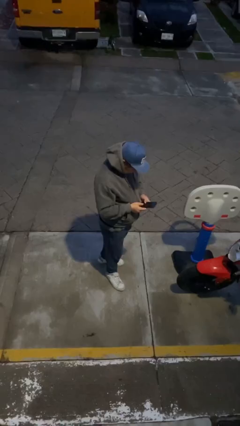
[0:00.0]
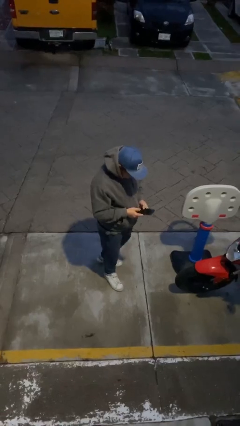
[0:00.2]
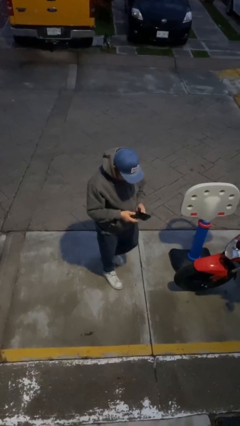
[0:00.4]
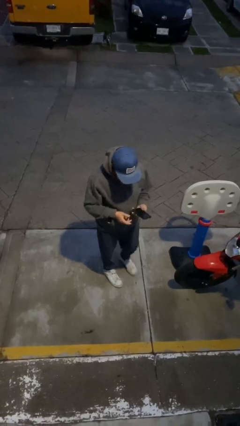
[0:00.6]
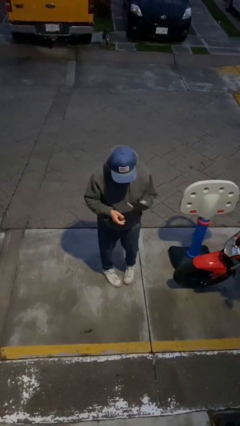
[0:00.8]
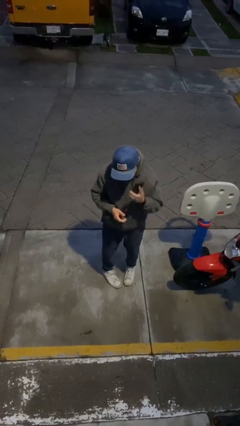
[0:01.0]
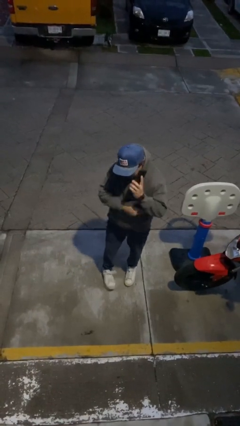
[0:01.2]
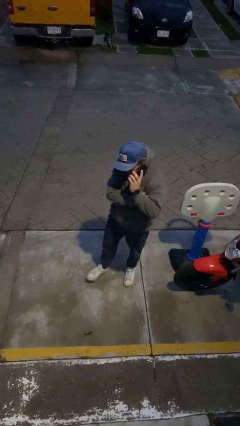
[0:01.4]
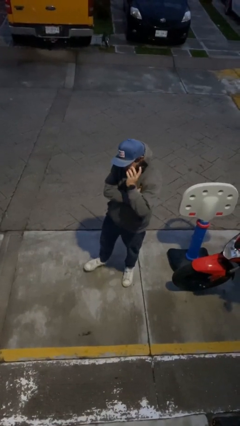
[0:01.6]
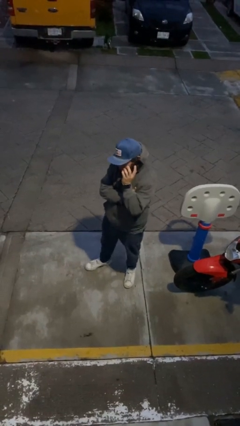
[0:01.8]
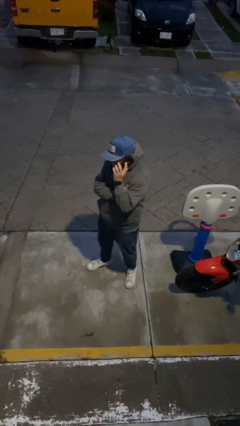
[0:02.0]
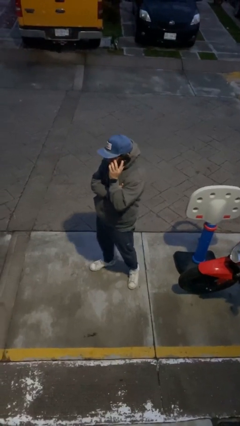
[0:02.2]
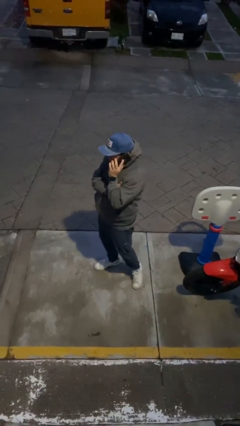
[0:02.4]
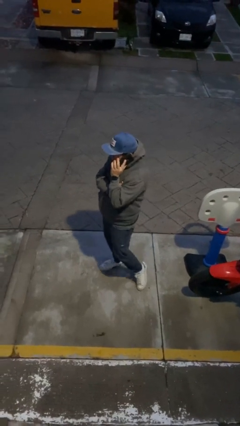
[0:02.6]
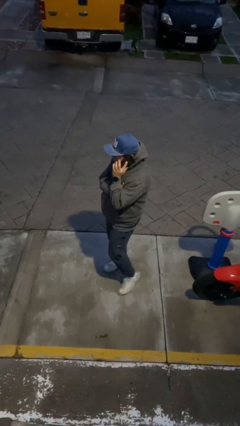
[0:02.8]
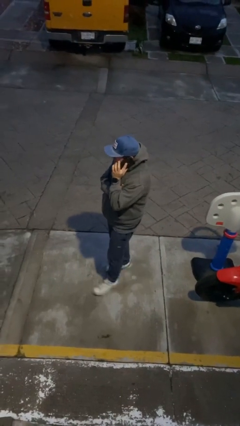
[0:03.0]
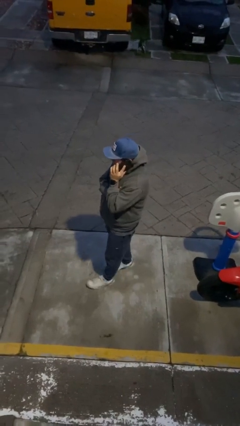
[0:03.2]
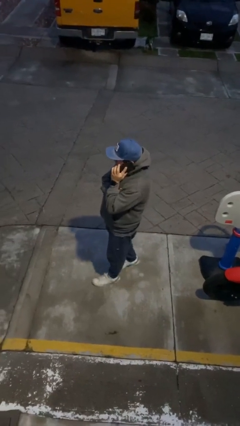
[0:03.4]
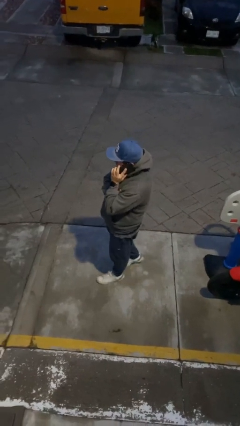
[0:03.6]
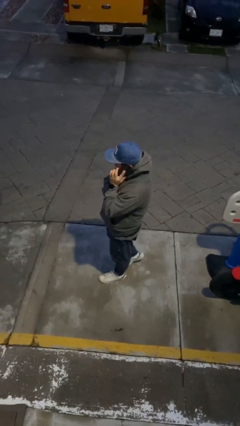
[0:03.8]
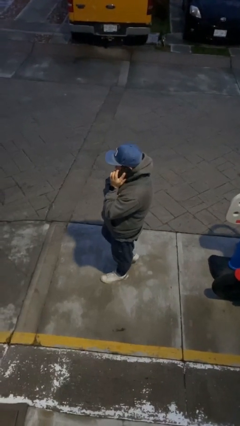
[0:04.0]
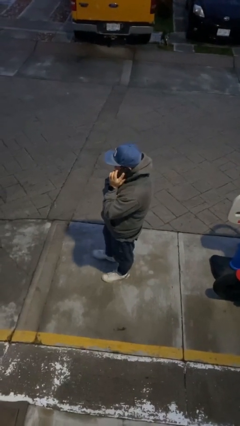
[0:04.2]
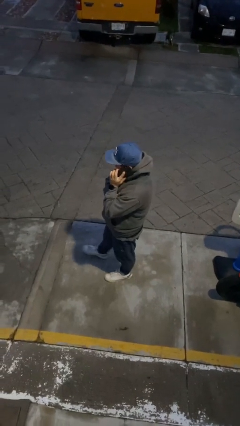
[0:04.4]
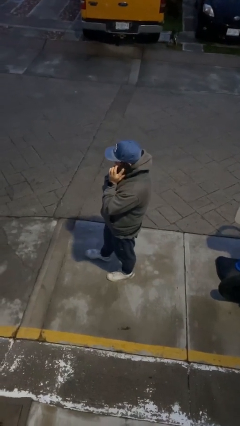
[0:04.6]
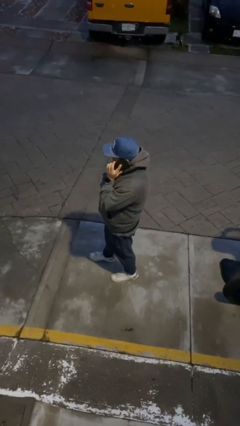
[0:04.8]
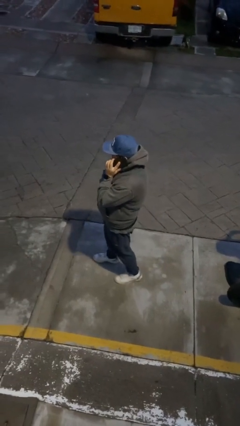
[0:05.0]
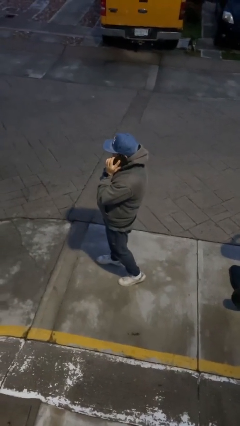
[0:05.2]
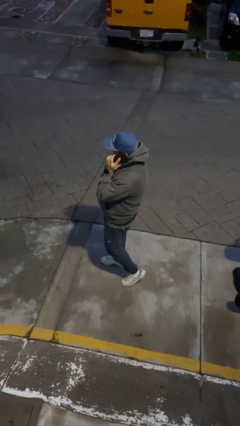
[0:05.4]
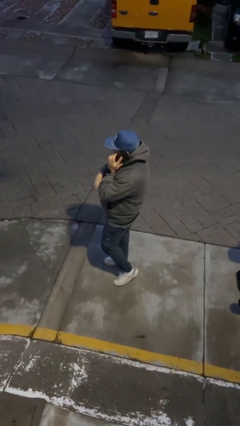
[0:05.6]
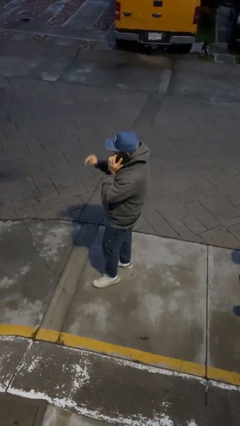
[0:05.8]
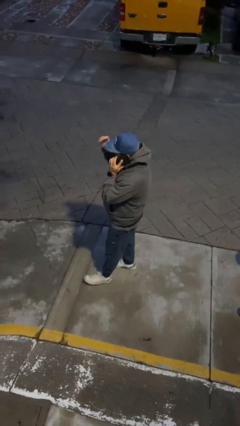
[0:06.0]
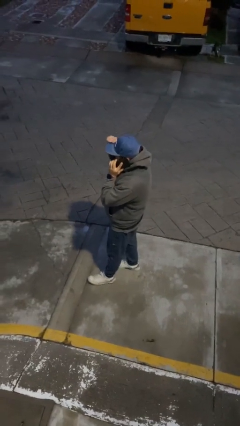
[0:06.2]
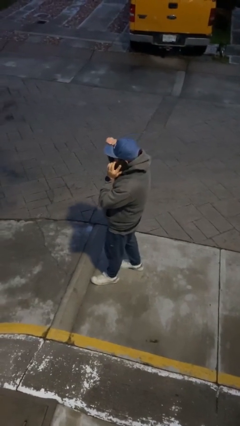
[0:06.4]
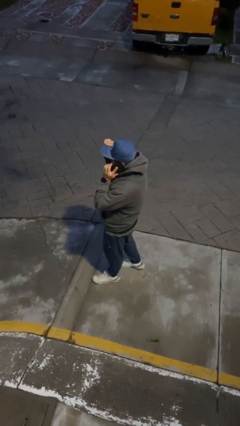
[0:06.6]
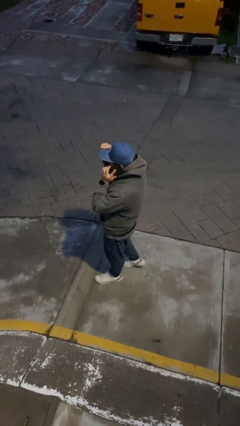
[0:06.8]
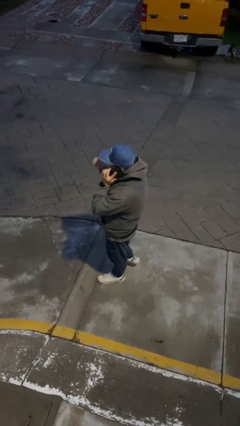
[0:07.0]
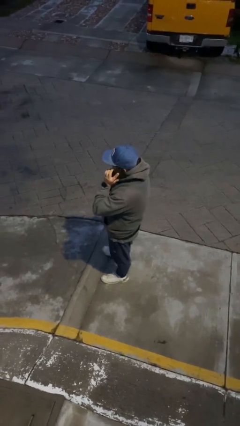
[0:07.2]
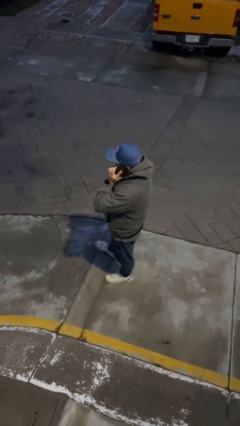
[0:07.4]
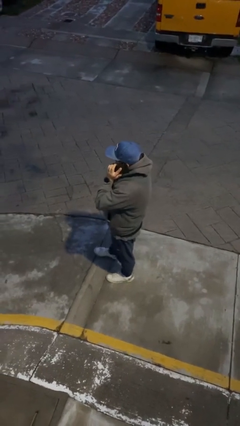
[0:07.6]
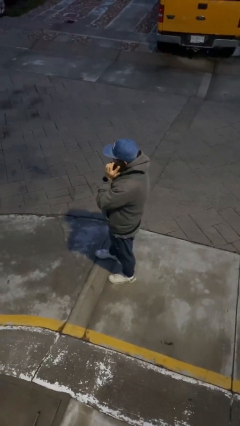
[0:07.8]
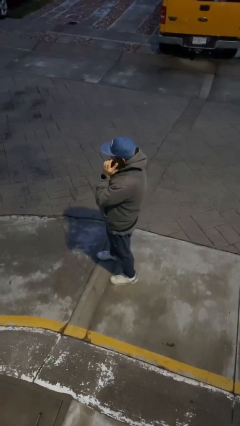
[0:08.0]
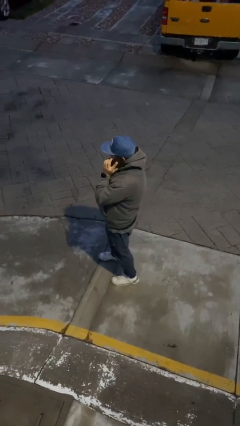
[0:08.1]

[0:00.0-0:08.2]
person talks on phone

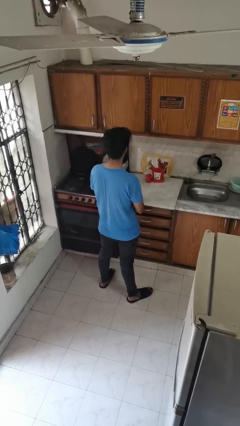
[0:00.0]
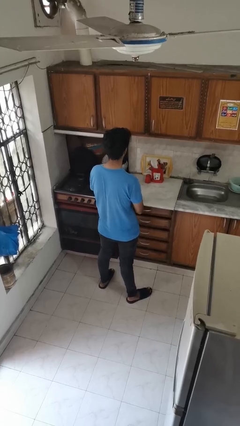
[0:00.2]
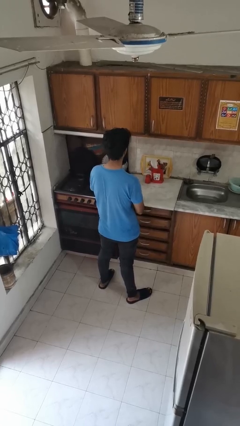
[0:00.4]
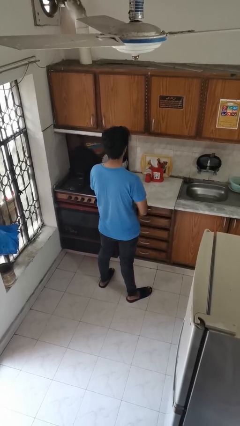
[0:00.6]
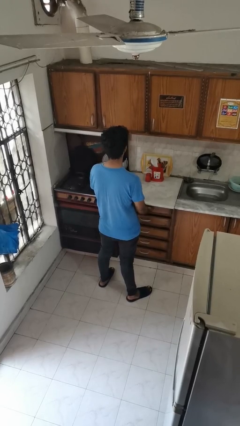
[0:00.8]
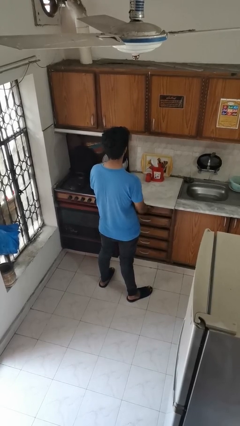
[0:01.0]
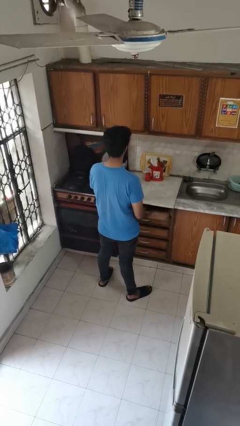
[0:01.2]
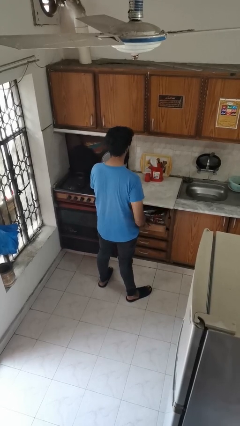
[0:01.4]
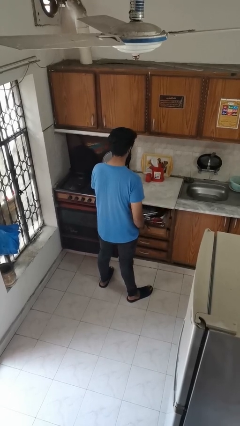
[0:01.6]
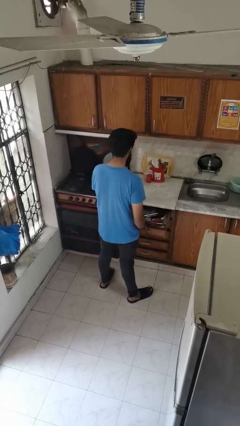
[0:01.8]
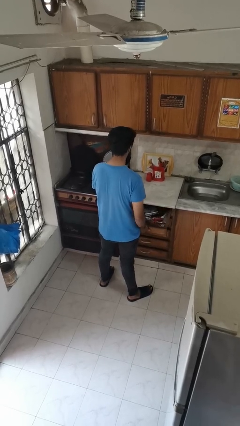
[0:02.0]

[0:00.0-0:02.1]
person opens kitchen drawer

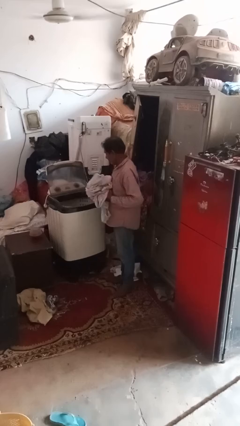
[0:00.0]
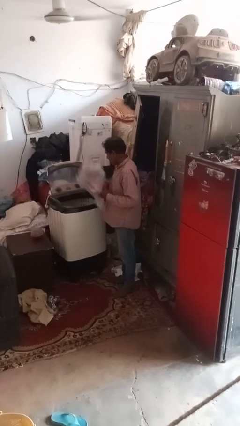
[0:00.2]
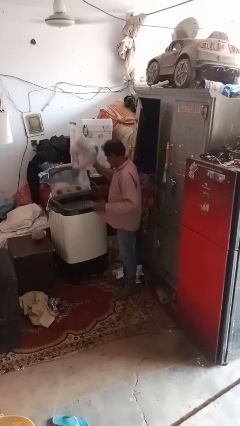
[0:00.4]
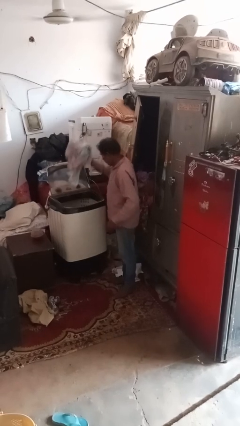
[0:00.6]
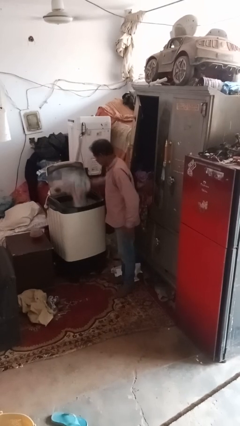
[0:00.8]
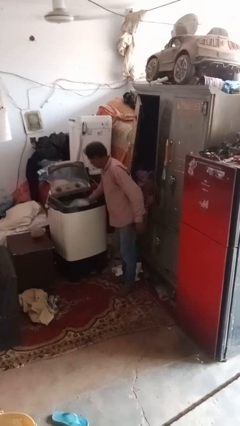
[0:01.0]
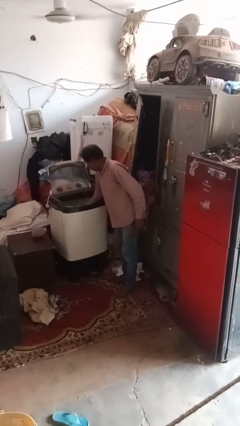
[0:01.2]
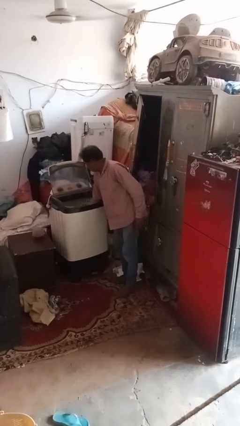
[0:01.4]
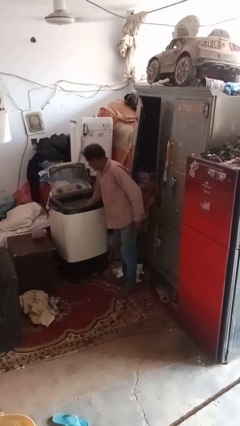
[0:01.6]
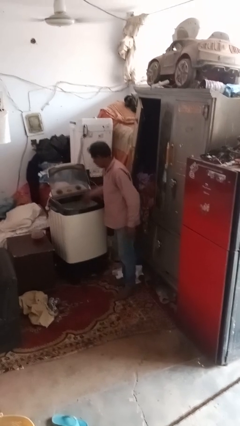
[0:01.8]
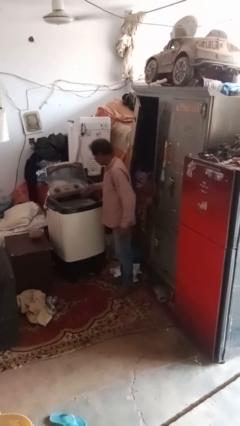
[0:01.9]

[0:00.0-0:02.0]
person loads clotheswasher

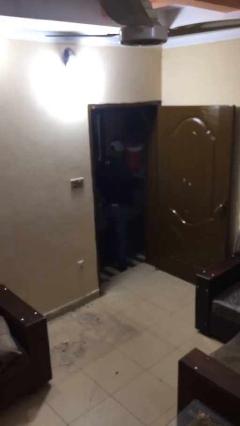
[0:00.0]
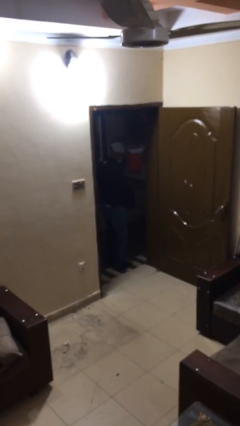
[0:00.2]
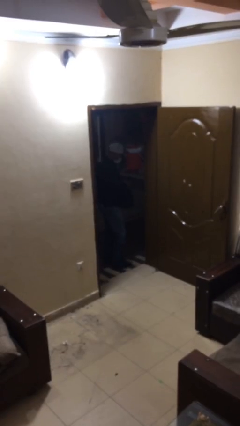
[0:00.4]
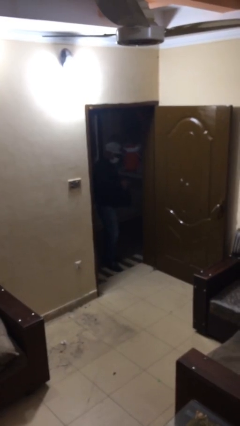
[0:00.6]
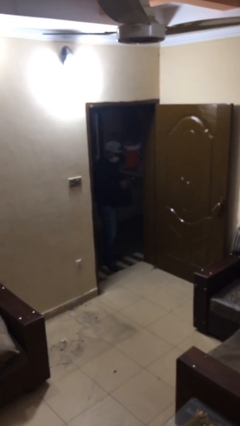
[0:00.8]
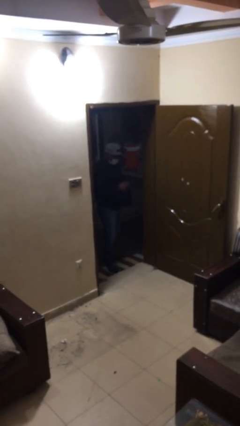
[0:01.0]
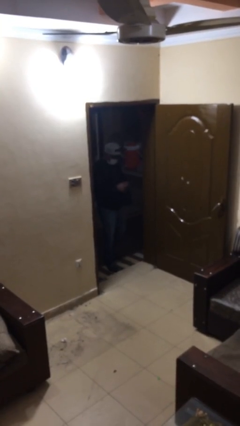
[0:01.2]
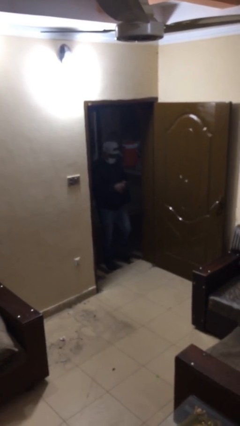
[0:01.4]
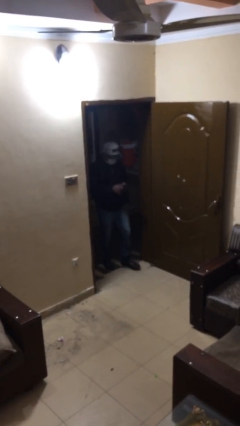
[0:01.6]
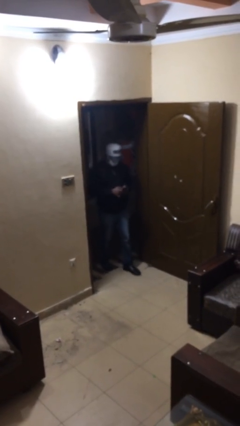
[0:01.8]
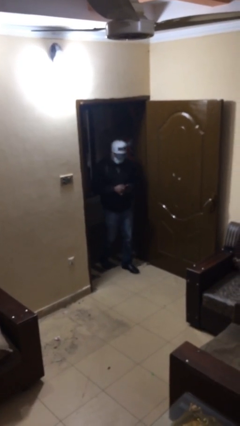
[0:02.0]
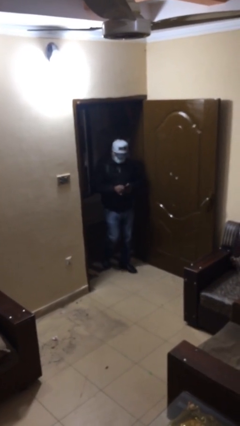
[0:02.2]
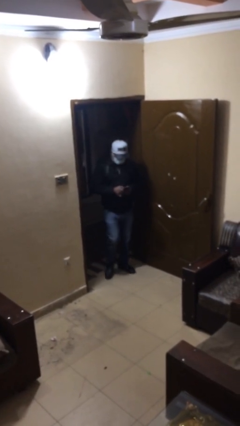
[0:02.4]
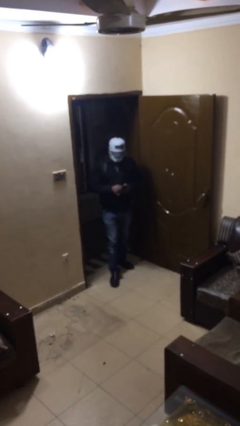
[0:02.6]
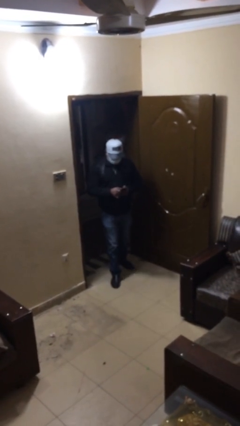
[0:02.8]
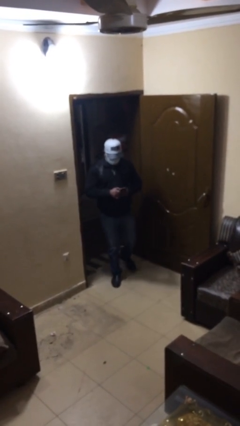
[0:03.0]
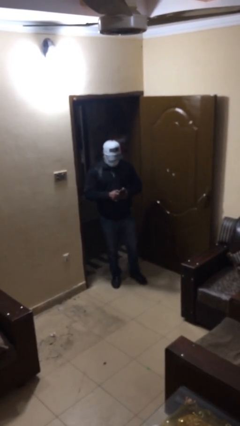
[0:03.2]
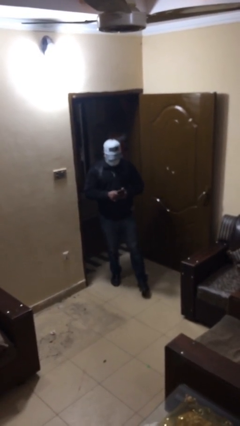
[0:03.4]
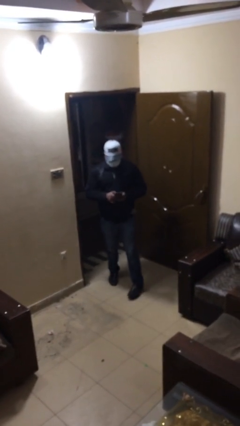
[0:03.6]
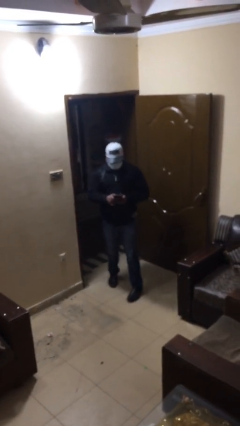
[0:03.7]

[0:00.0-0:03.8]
person enters scene through structure

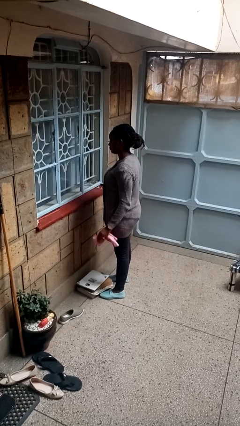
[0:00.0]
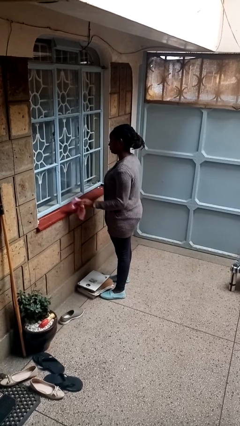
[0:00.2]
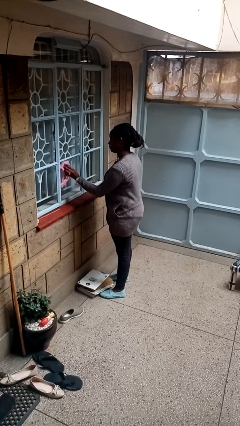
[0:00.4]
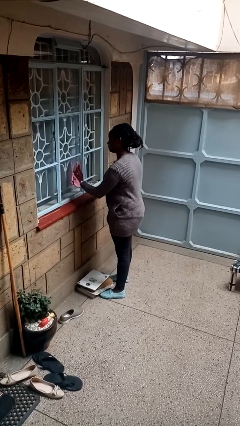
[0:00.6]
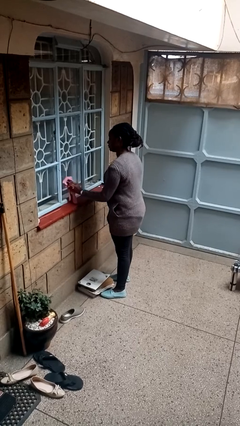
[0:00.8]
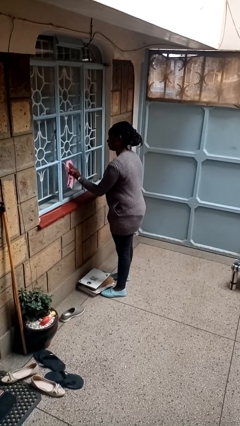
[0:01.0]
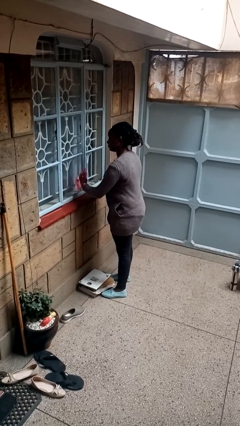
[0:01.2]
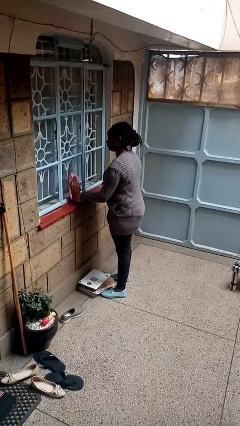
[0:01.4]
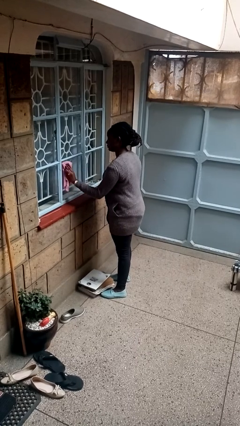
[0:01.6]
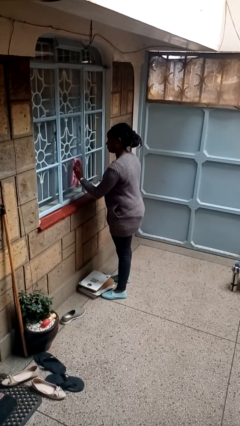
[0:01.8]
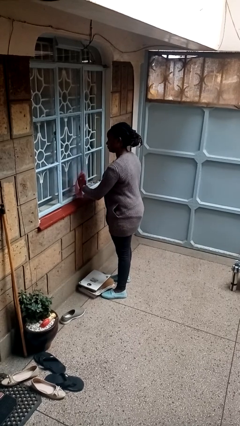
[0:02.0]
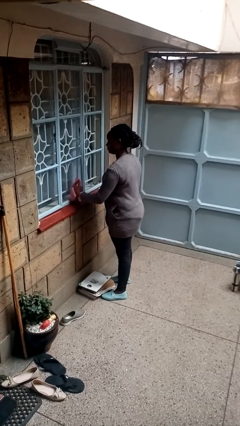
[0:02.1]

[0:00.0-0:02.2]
person washes window
